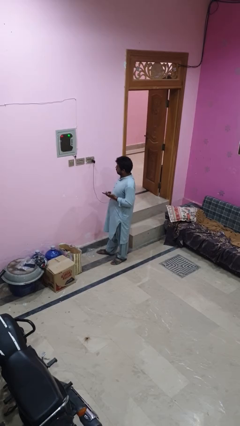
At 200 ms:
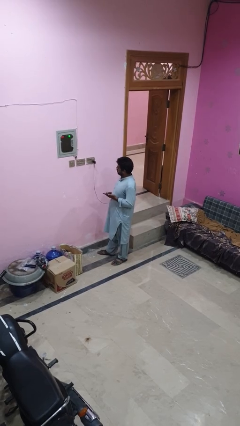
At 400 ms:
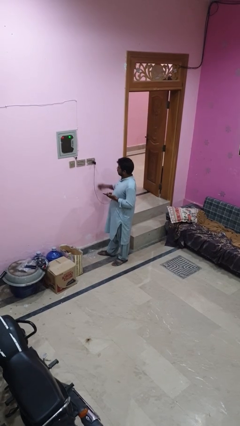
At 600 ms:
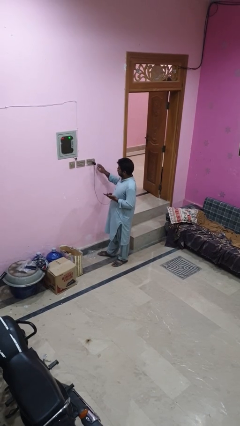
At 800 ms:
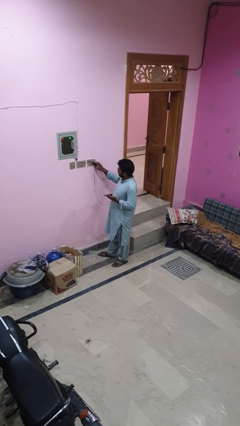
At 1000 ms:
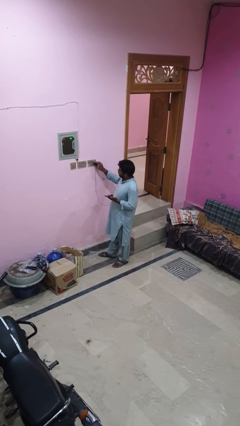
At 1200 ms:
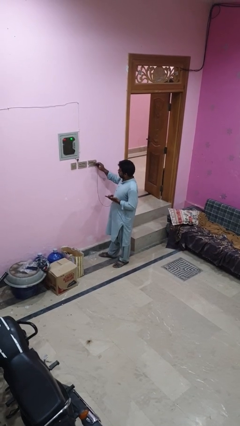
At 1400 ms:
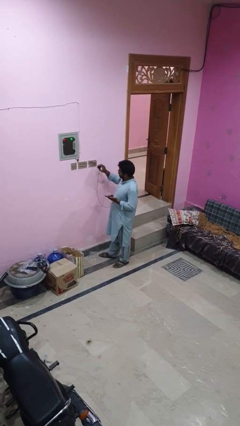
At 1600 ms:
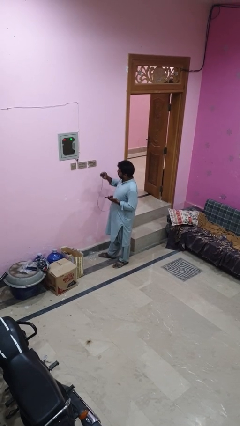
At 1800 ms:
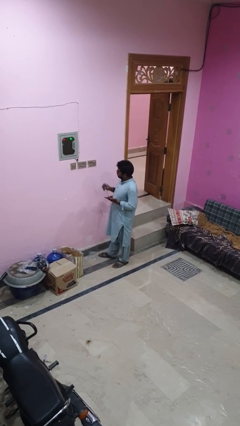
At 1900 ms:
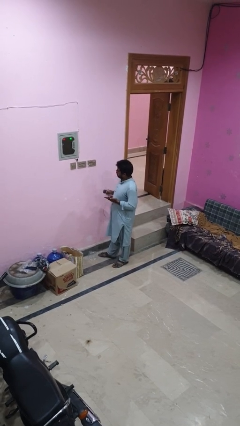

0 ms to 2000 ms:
person unplugs from electrical socket

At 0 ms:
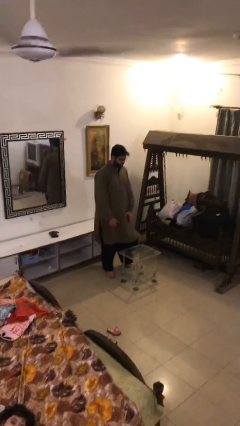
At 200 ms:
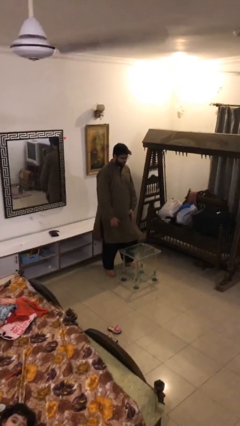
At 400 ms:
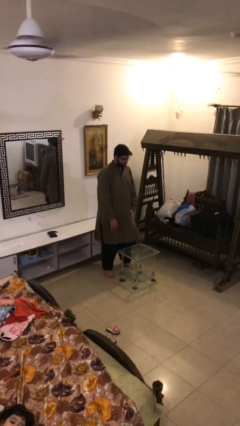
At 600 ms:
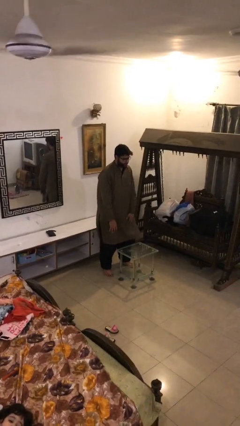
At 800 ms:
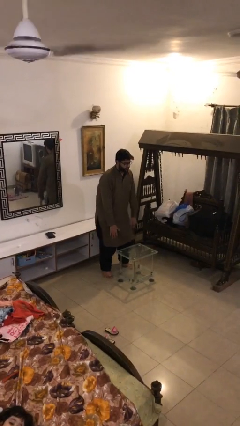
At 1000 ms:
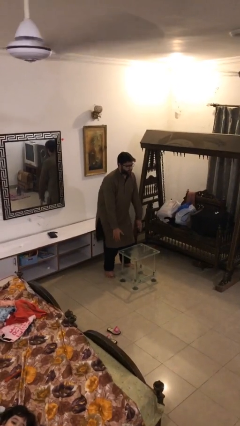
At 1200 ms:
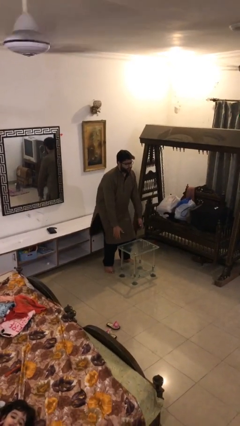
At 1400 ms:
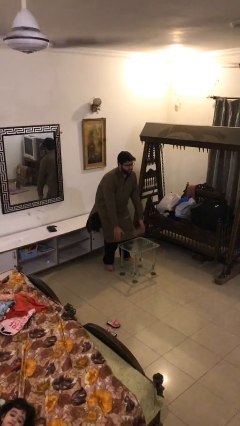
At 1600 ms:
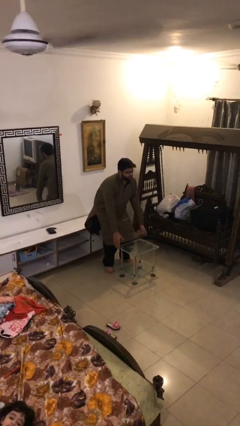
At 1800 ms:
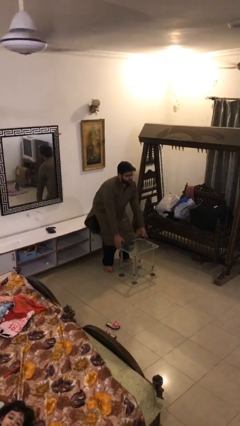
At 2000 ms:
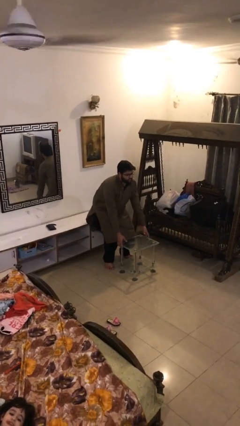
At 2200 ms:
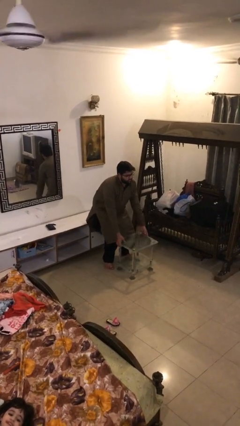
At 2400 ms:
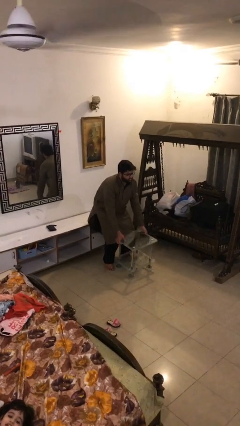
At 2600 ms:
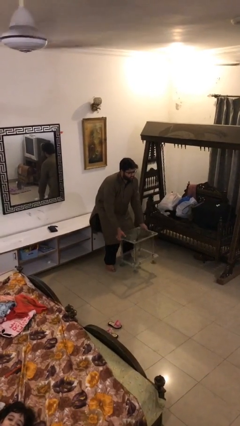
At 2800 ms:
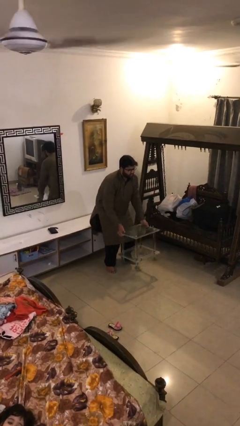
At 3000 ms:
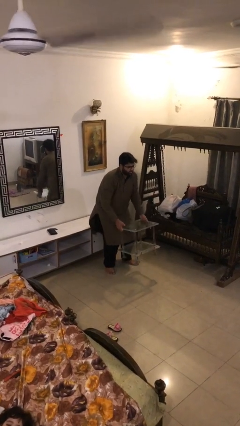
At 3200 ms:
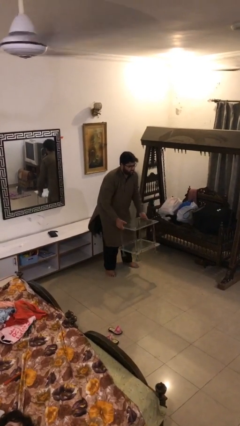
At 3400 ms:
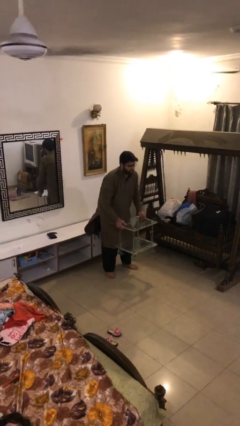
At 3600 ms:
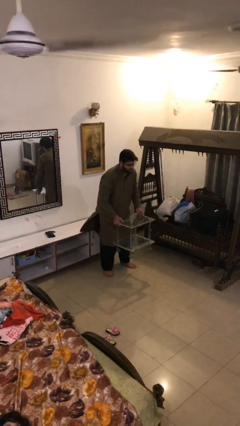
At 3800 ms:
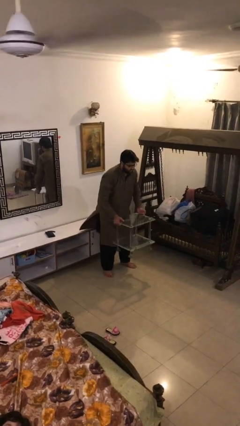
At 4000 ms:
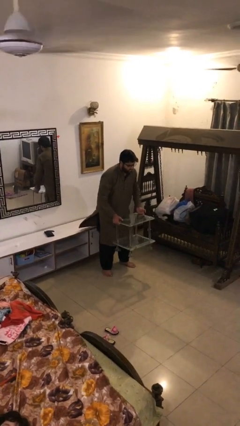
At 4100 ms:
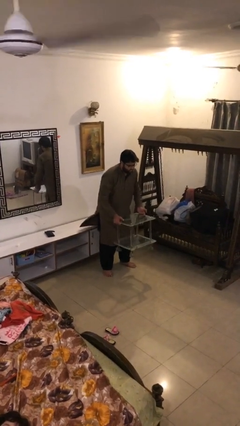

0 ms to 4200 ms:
person picks up object from floor

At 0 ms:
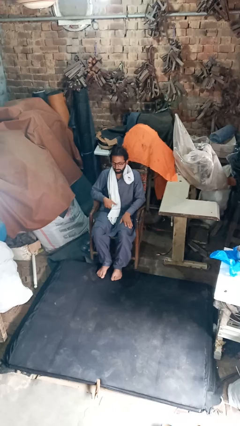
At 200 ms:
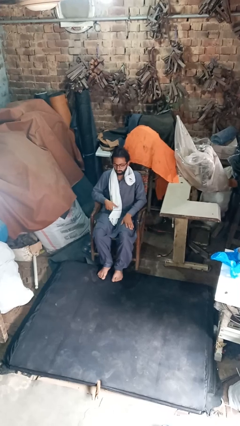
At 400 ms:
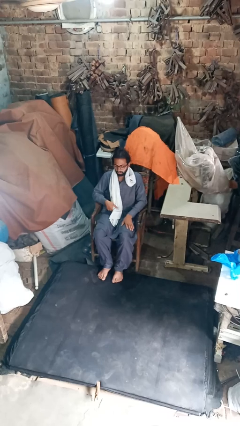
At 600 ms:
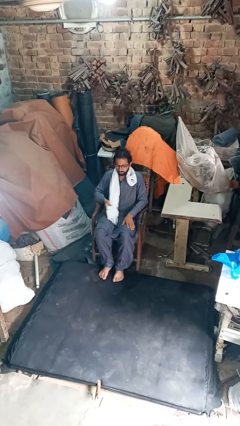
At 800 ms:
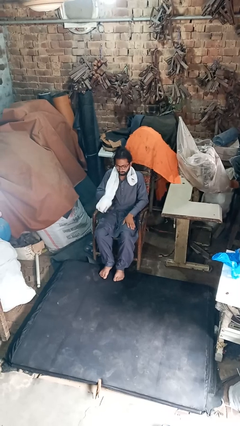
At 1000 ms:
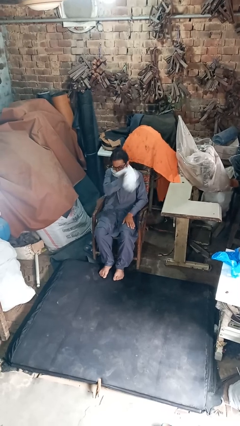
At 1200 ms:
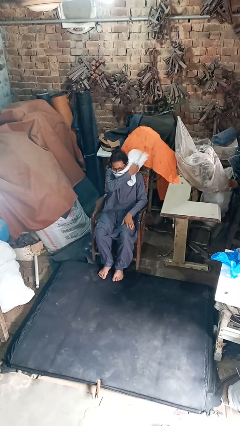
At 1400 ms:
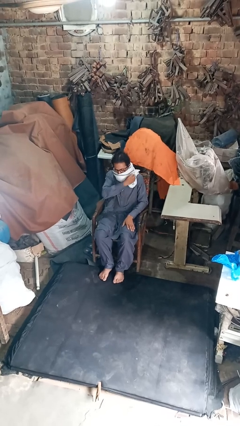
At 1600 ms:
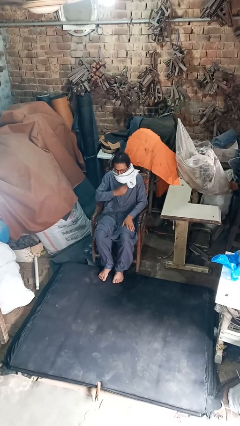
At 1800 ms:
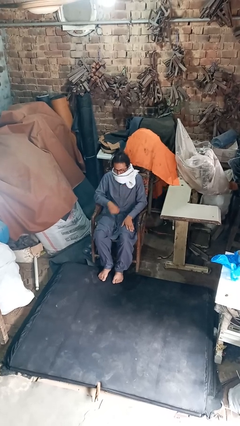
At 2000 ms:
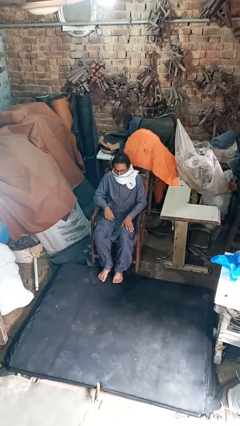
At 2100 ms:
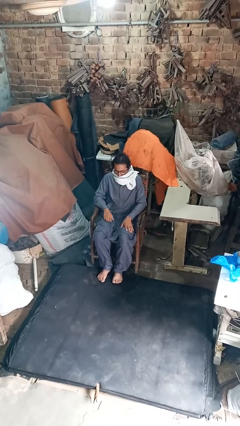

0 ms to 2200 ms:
person puts on scarf

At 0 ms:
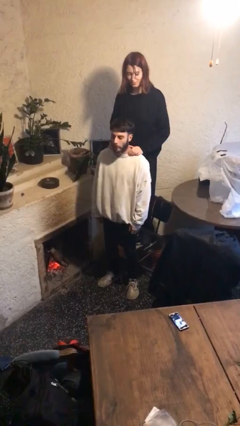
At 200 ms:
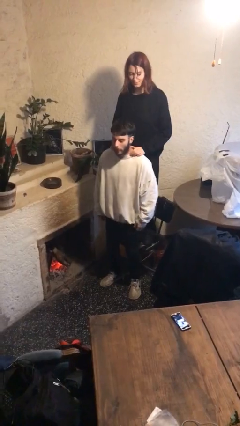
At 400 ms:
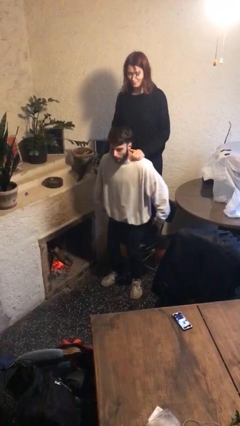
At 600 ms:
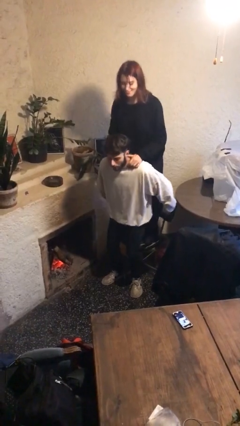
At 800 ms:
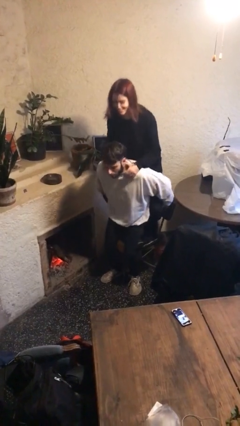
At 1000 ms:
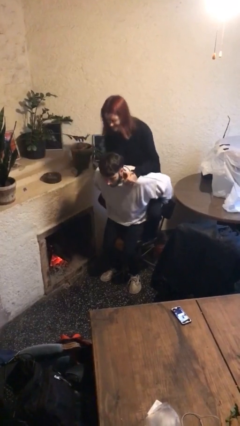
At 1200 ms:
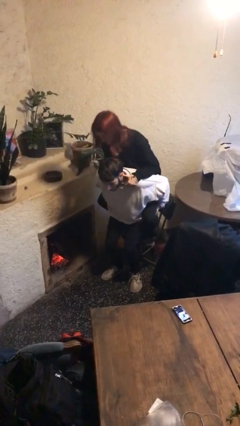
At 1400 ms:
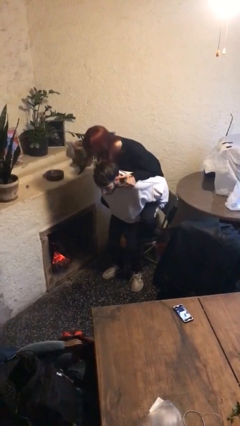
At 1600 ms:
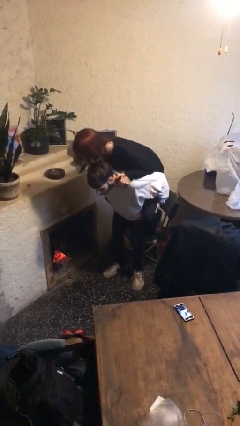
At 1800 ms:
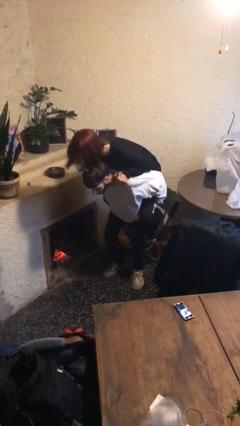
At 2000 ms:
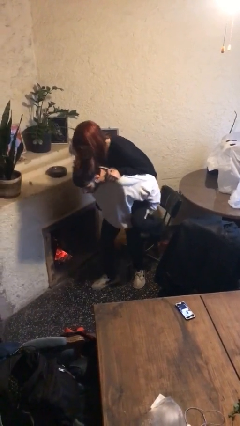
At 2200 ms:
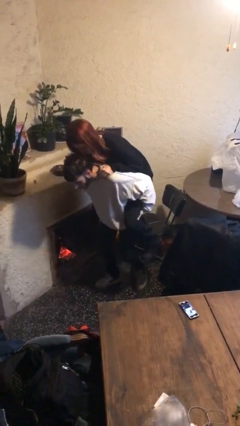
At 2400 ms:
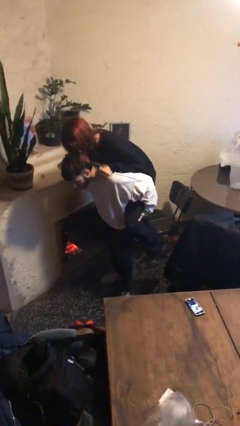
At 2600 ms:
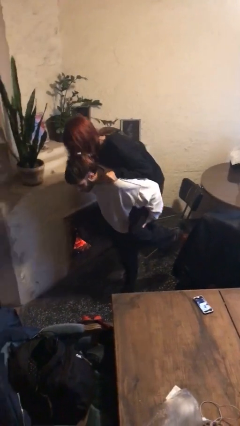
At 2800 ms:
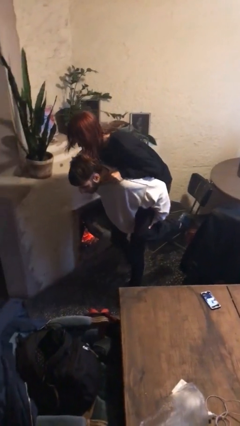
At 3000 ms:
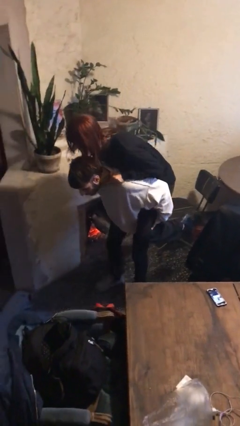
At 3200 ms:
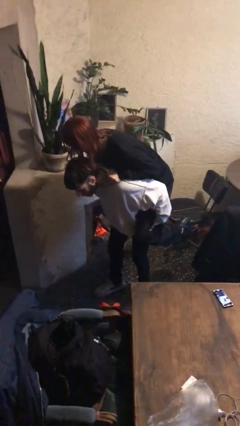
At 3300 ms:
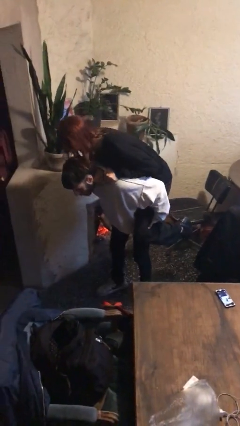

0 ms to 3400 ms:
person carries person over shoulder

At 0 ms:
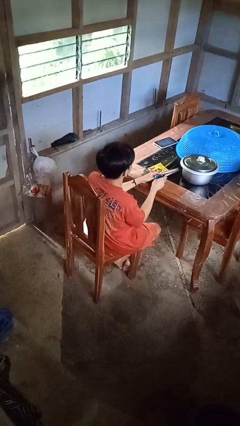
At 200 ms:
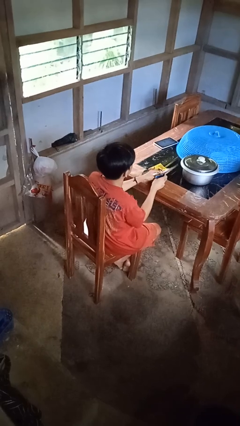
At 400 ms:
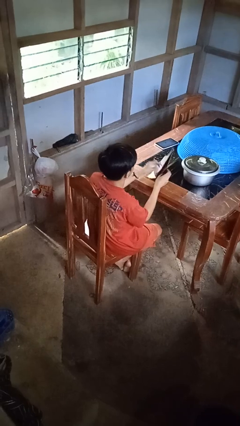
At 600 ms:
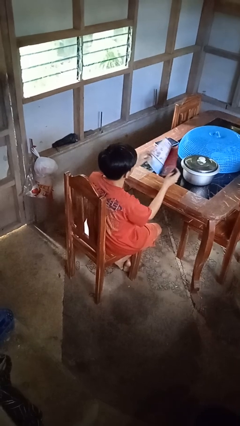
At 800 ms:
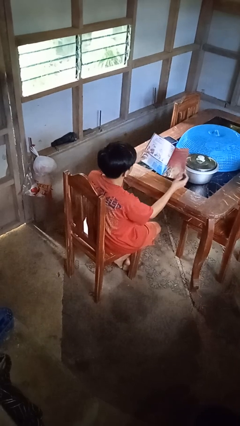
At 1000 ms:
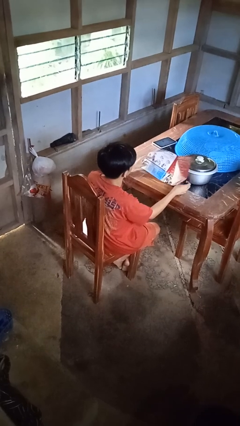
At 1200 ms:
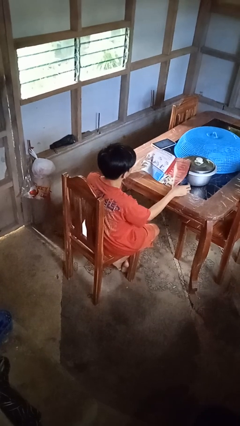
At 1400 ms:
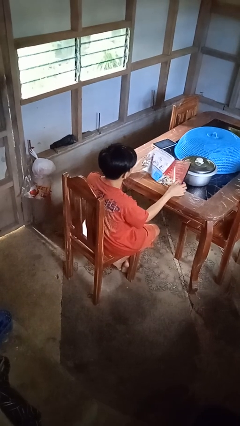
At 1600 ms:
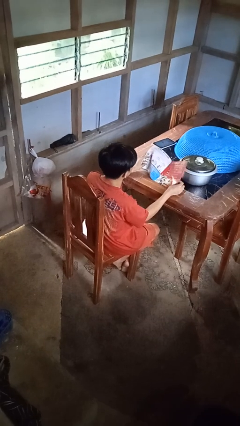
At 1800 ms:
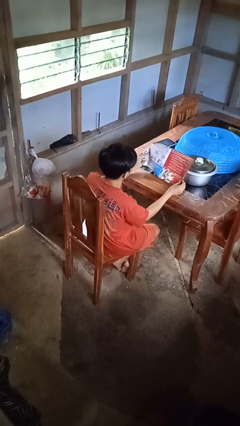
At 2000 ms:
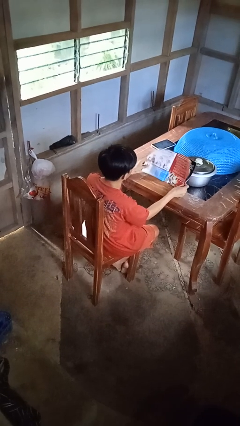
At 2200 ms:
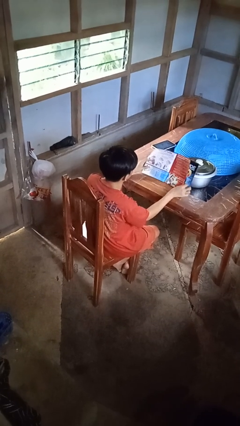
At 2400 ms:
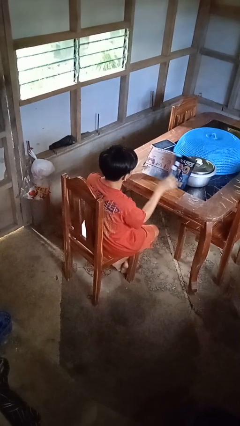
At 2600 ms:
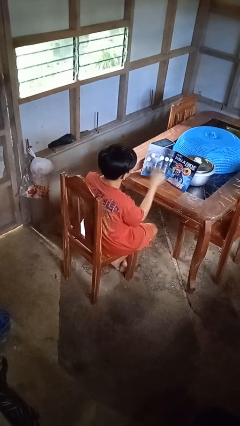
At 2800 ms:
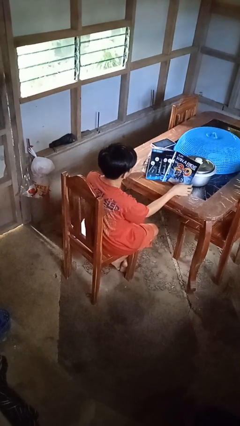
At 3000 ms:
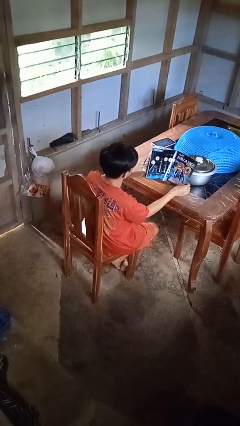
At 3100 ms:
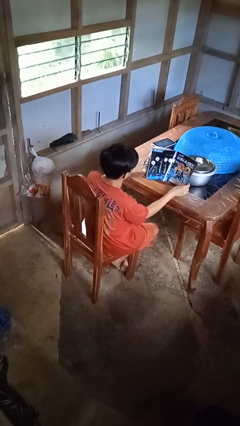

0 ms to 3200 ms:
person reads magazine

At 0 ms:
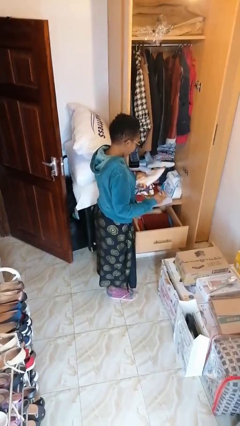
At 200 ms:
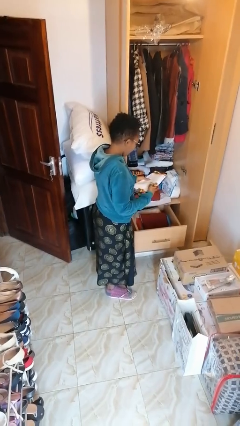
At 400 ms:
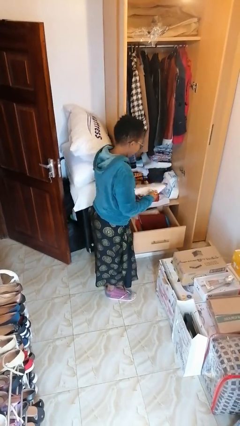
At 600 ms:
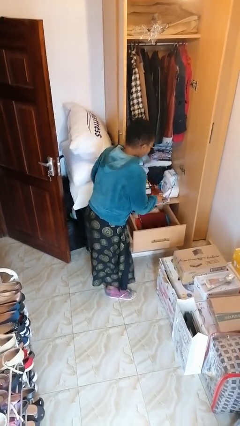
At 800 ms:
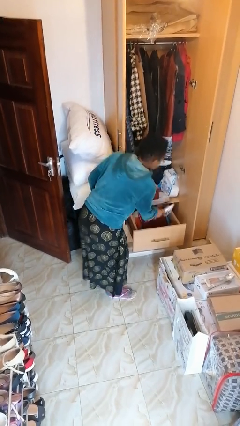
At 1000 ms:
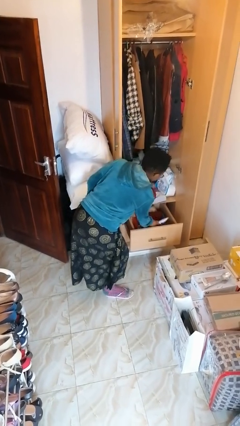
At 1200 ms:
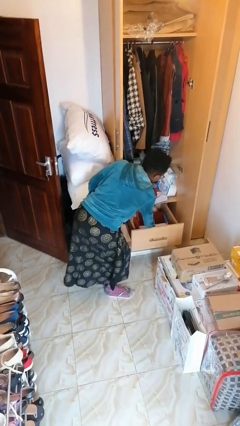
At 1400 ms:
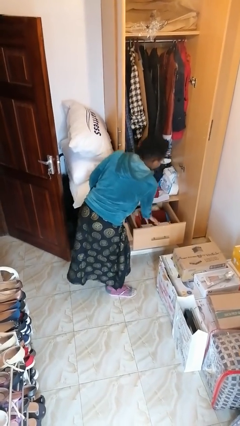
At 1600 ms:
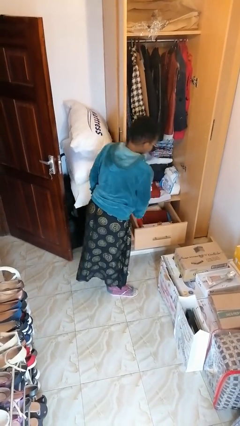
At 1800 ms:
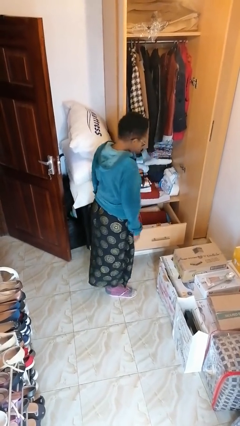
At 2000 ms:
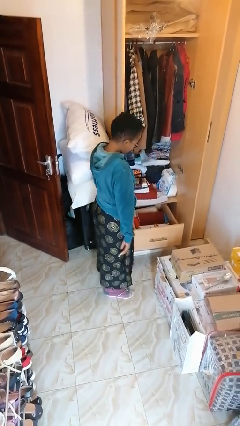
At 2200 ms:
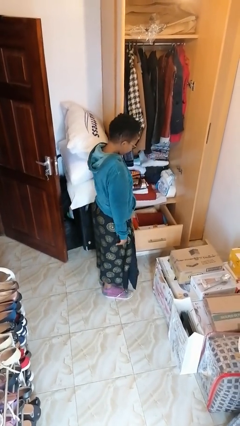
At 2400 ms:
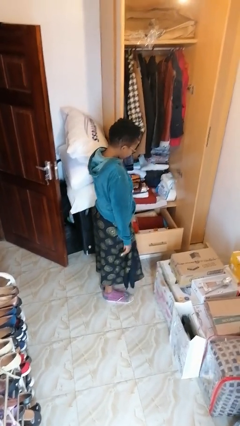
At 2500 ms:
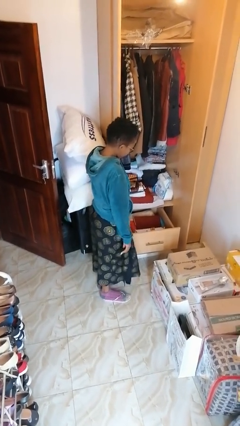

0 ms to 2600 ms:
person puts clothes into dresser
